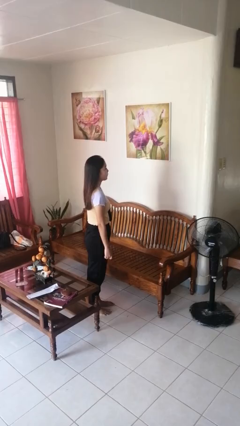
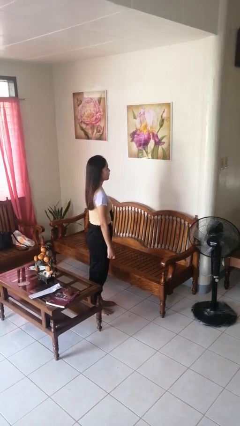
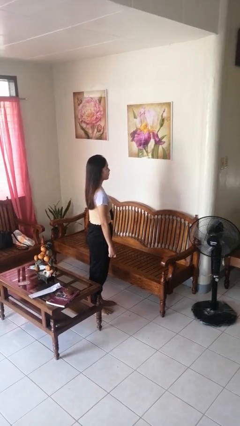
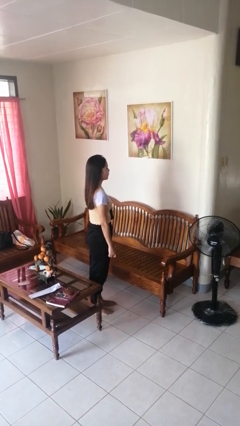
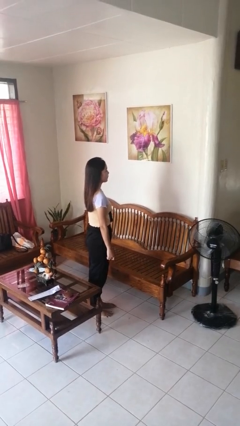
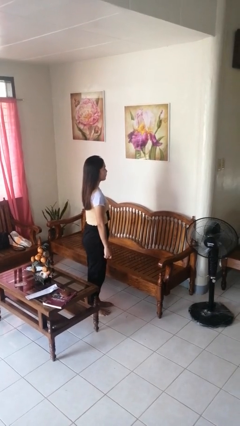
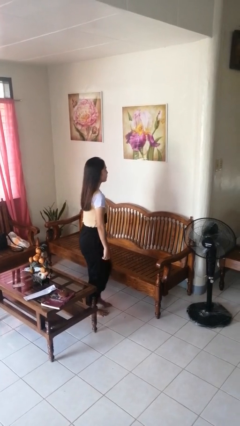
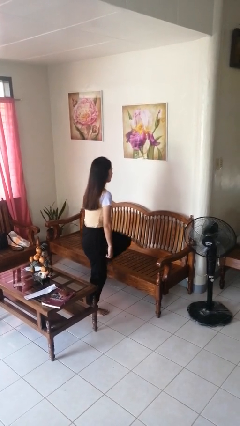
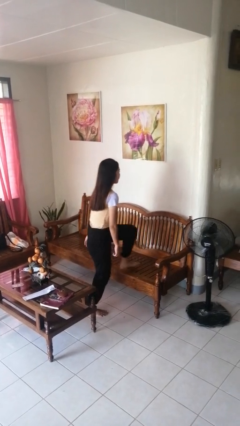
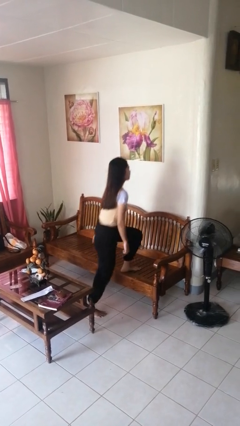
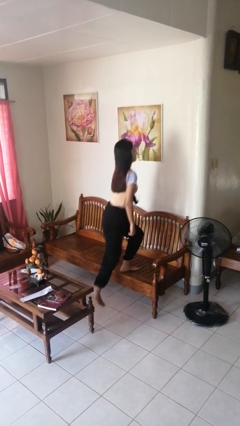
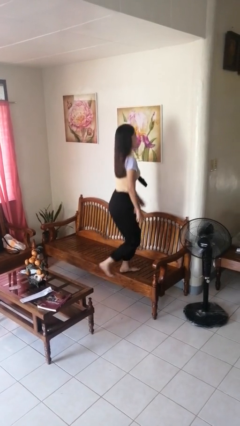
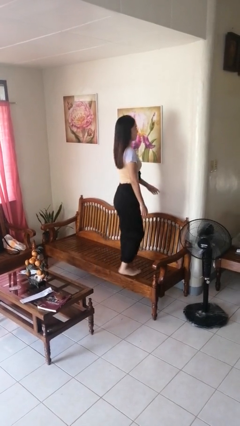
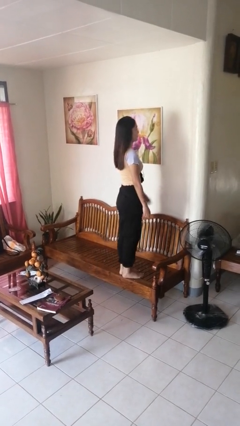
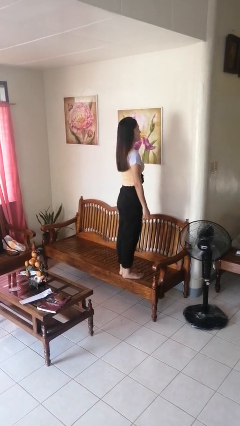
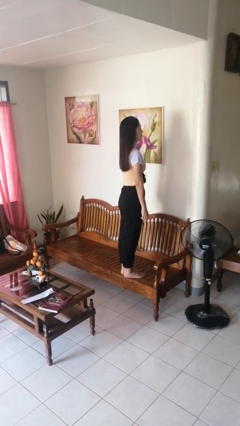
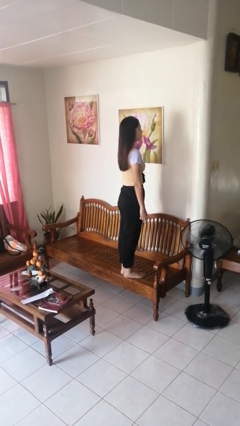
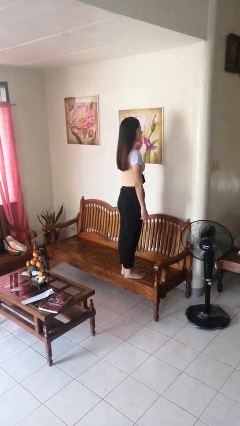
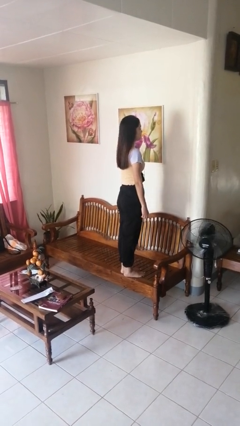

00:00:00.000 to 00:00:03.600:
person climbs on chair

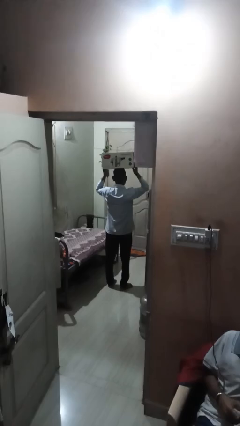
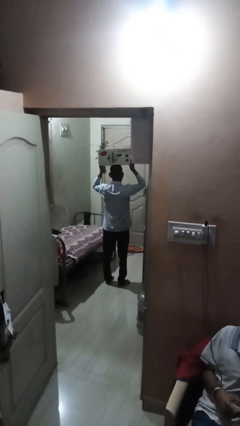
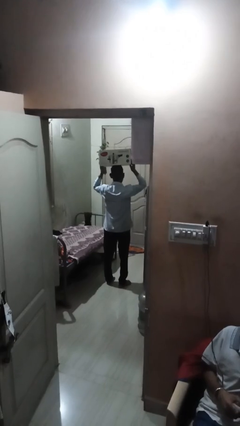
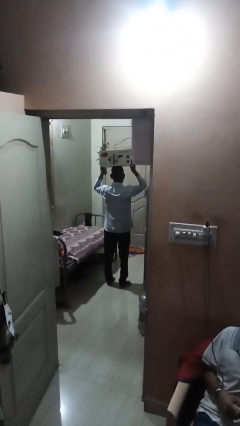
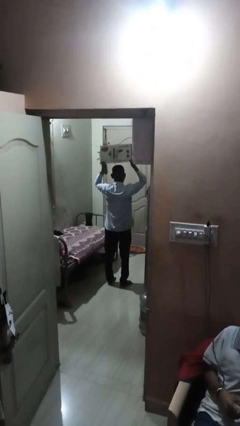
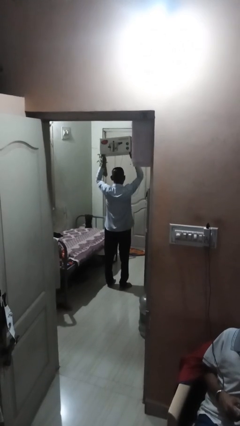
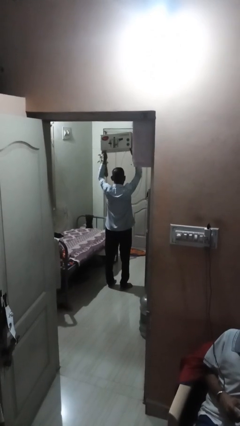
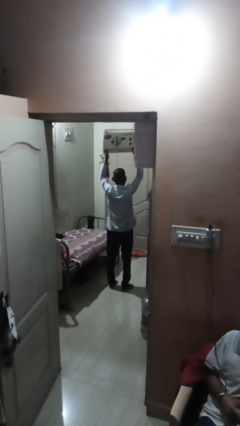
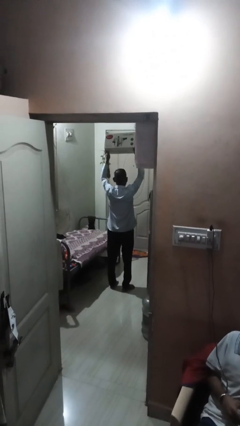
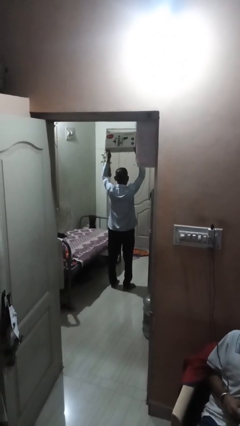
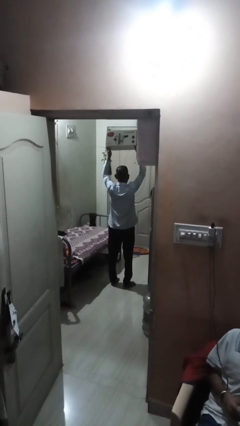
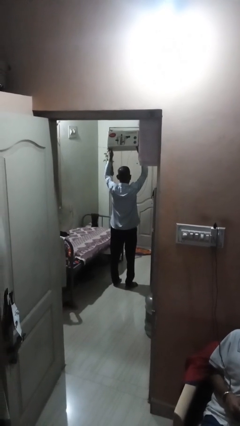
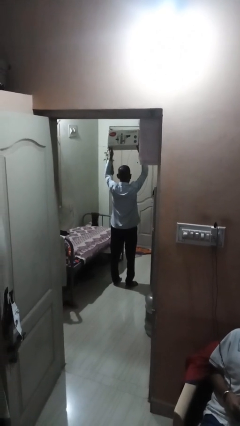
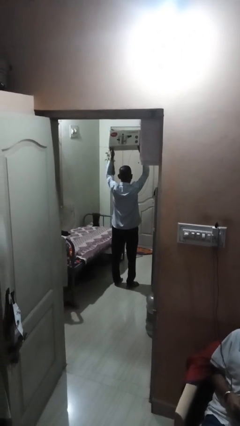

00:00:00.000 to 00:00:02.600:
person holds object above head

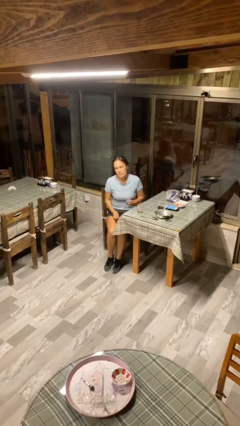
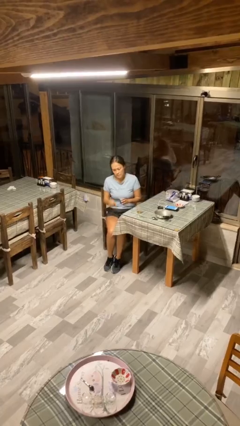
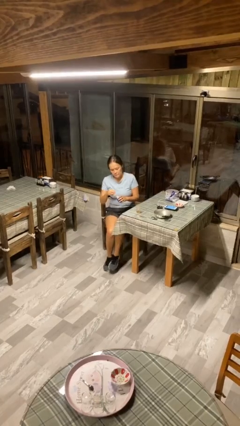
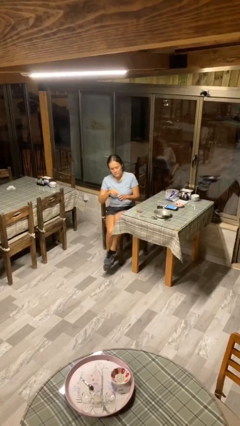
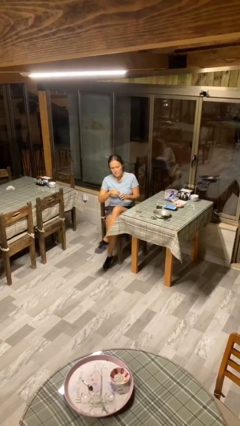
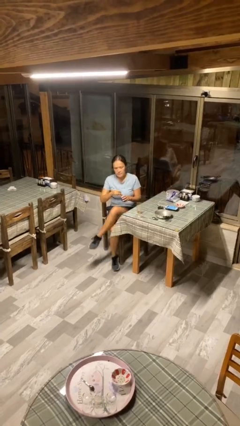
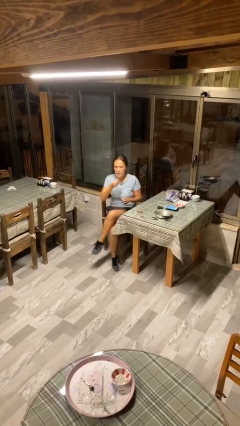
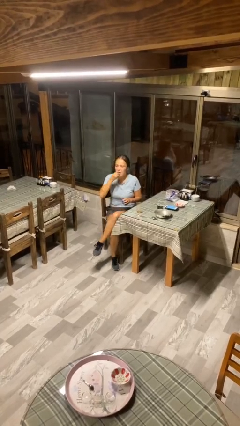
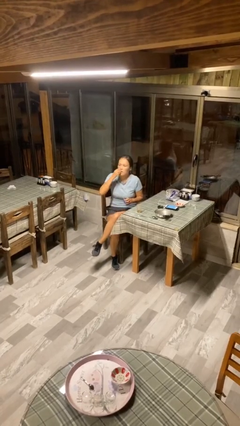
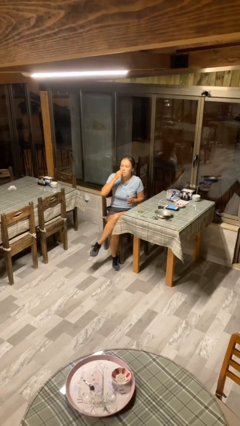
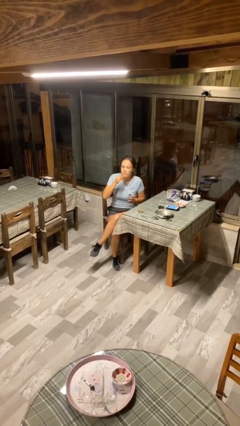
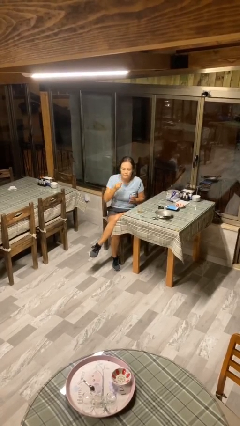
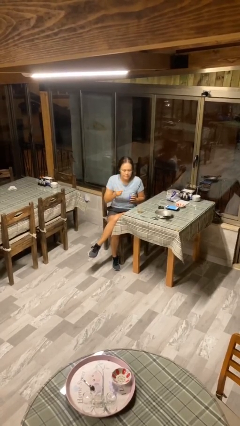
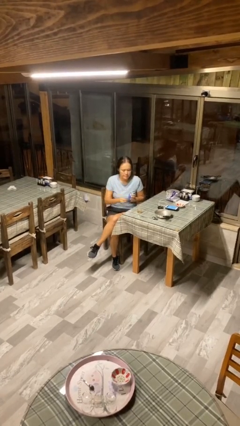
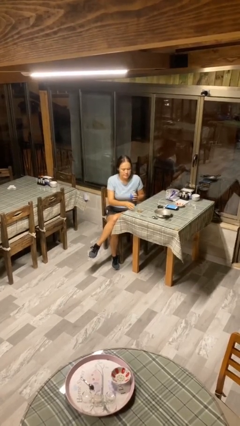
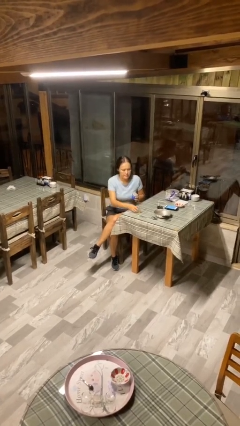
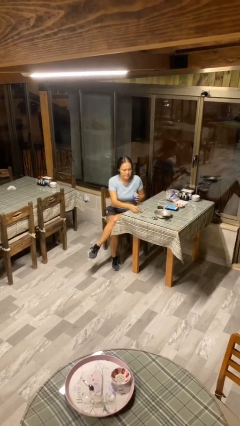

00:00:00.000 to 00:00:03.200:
person takes medicine pills

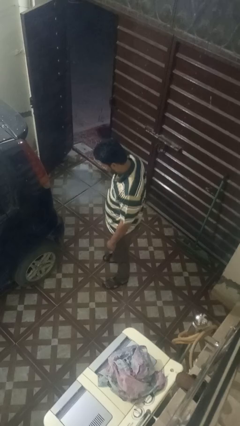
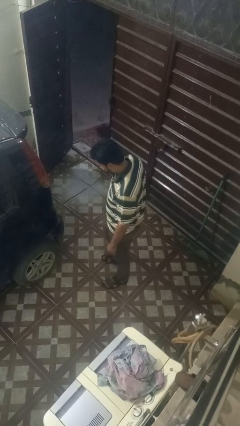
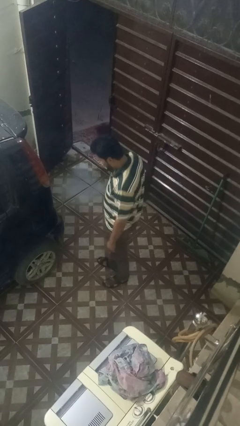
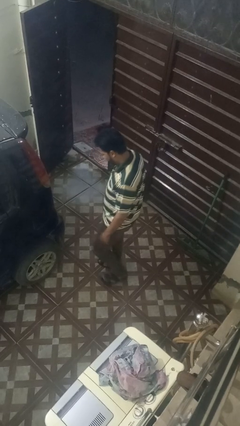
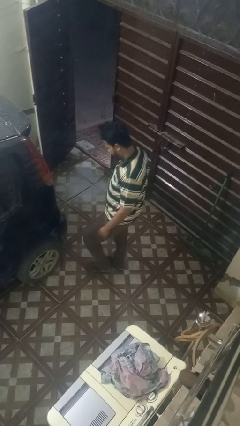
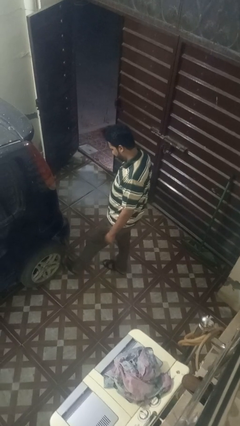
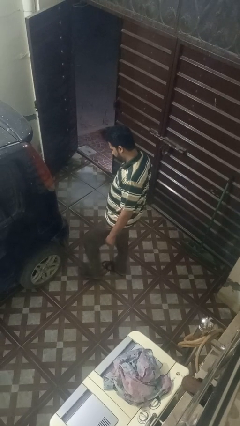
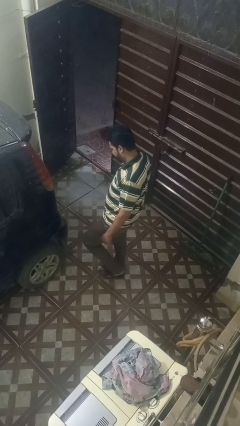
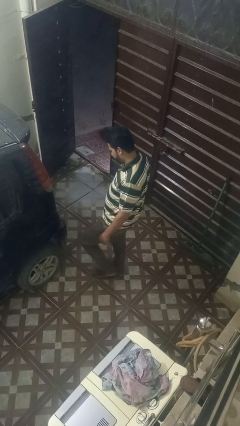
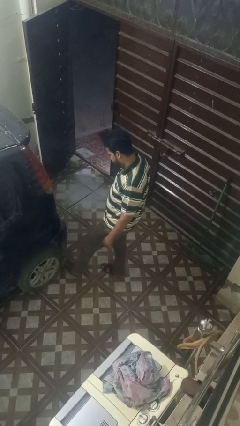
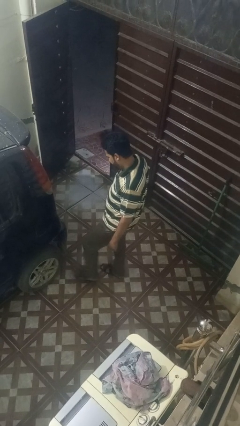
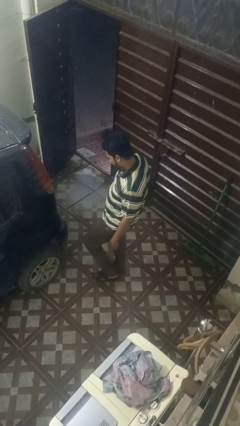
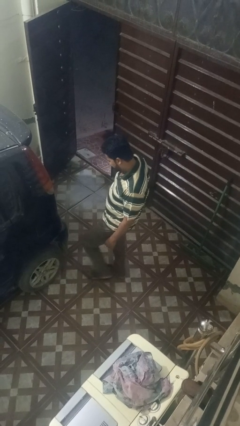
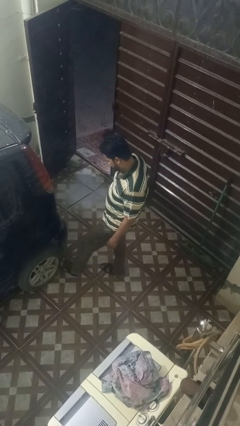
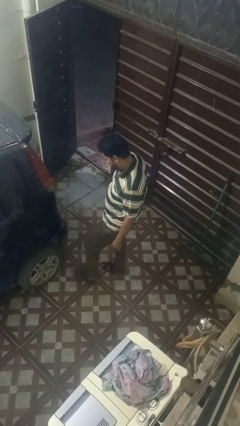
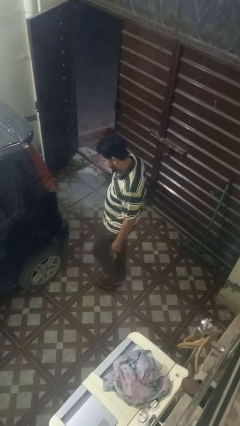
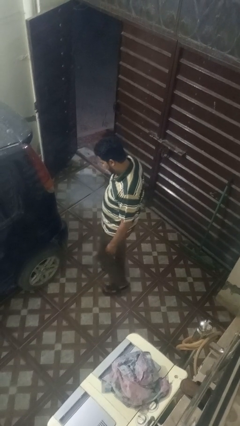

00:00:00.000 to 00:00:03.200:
person kicks car tires

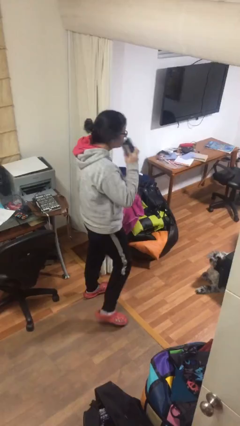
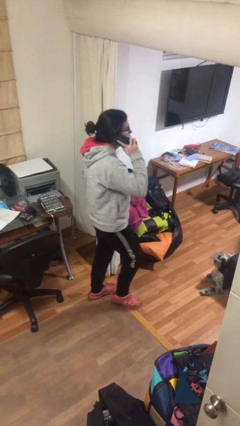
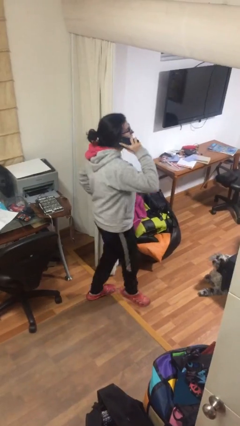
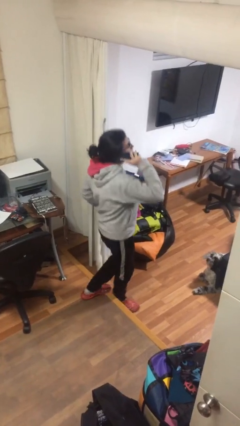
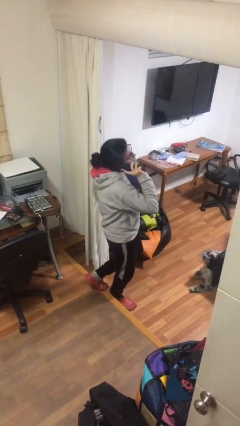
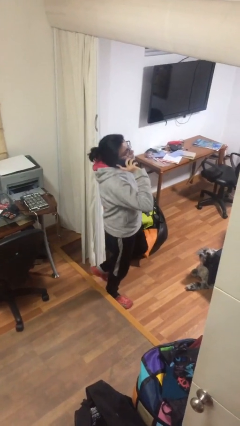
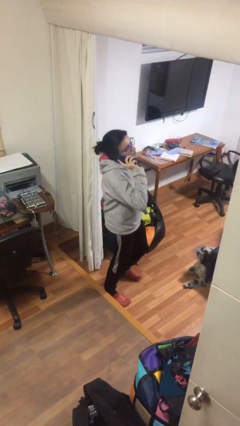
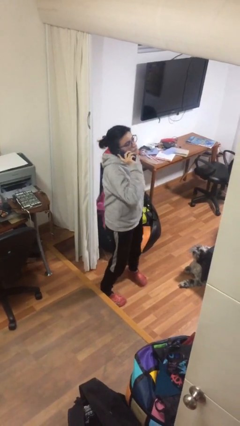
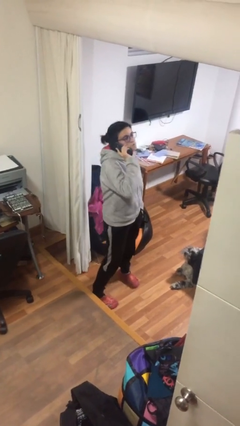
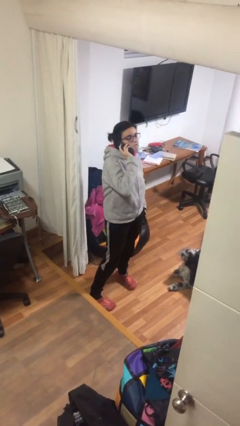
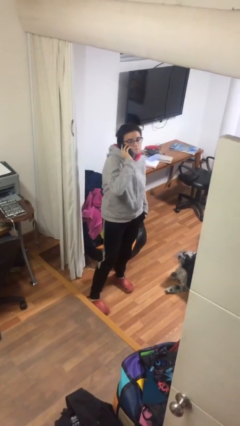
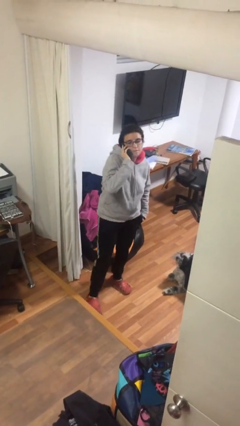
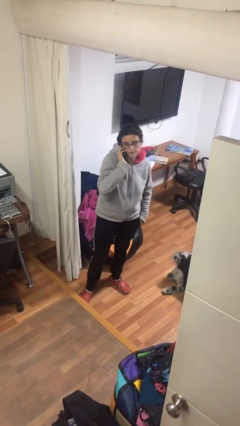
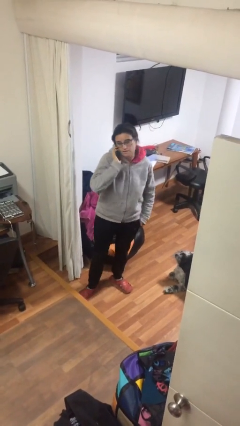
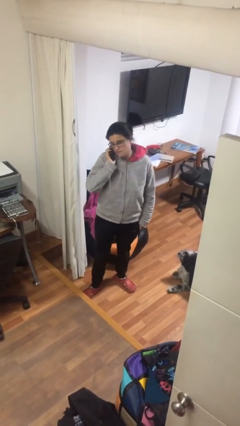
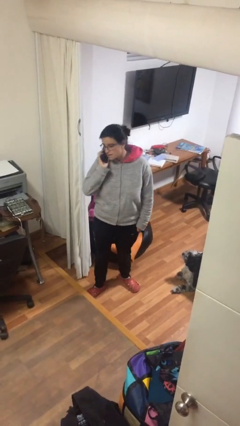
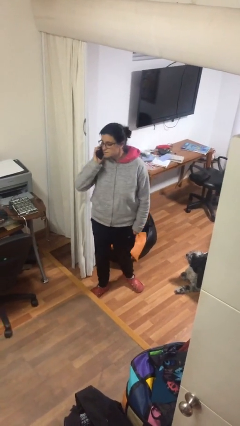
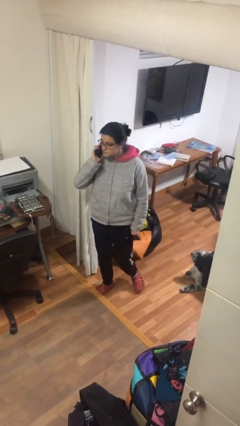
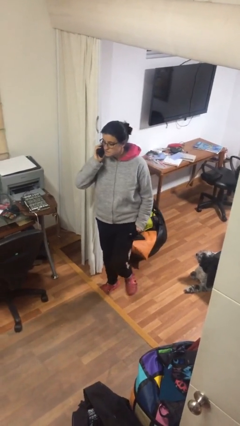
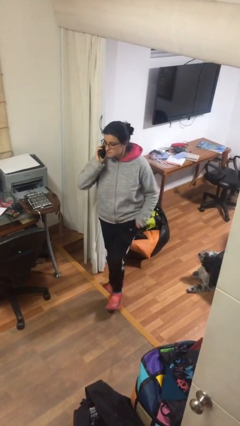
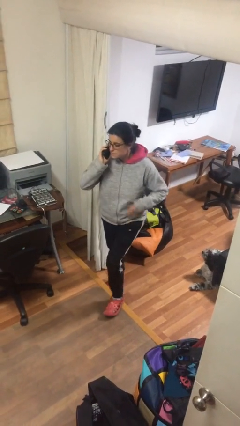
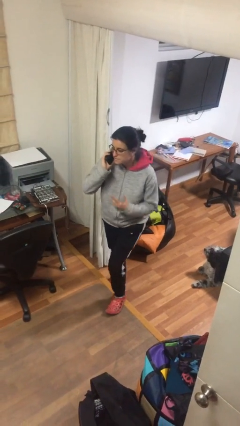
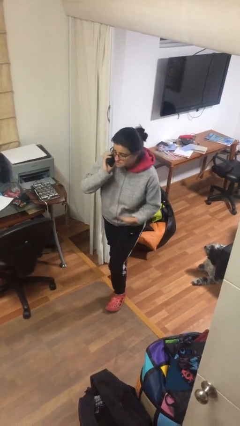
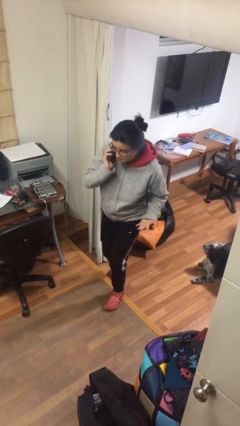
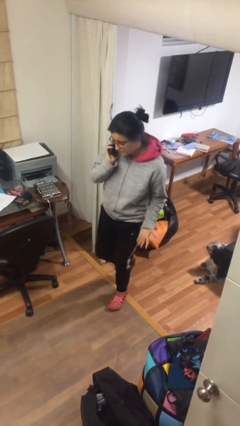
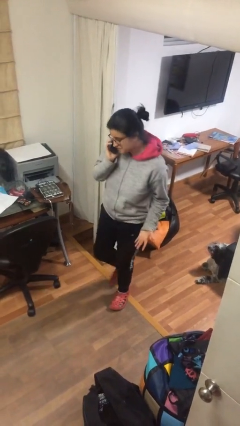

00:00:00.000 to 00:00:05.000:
person talks on phone
